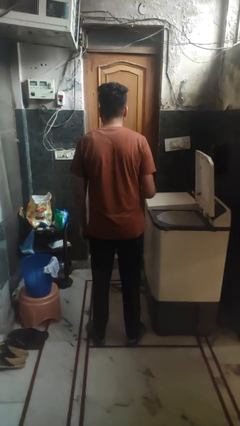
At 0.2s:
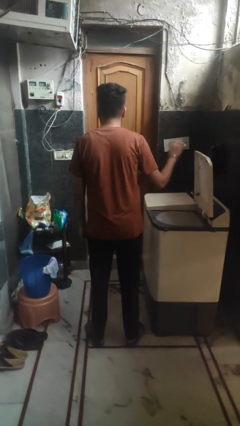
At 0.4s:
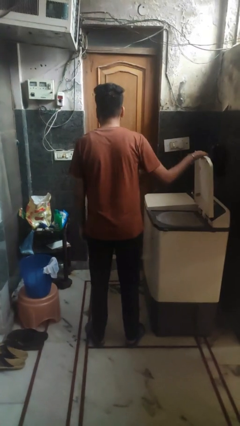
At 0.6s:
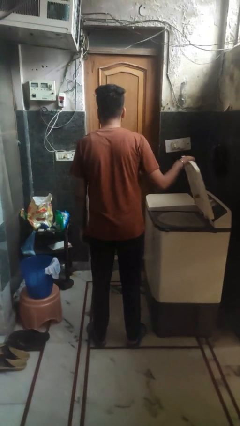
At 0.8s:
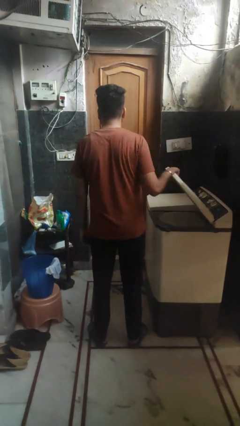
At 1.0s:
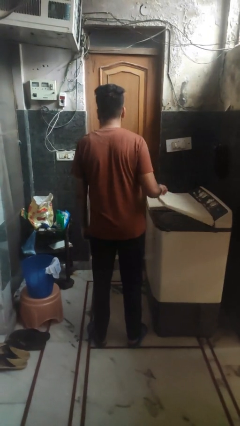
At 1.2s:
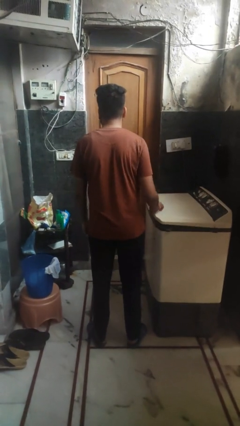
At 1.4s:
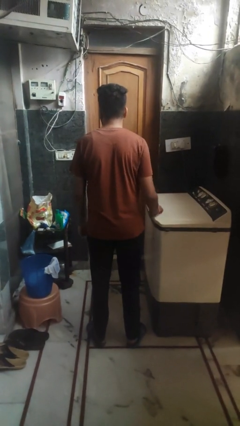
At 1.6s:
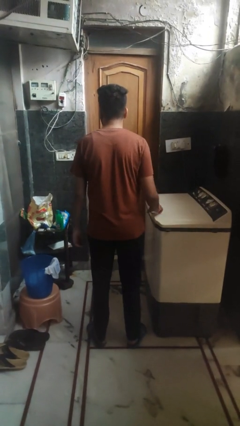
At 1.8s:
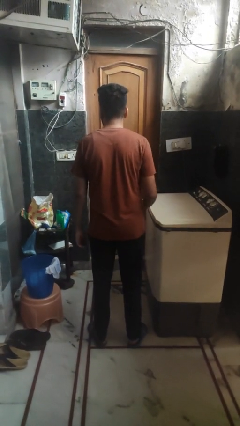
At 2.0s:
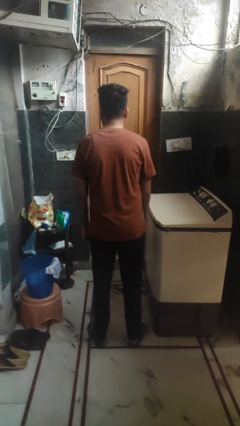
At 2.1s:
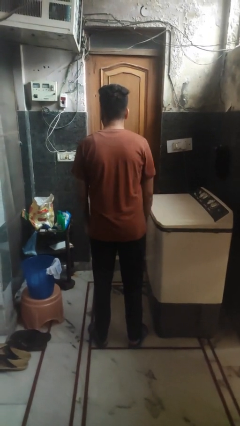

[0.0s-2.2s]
person closes clothes washer

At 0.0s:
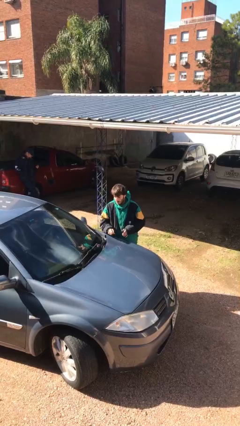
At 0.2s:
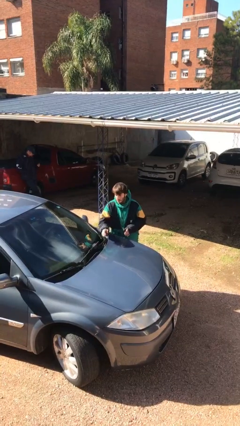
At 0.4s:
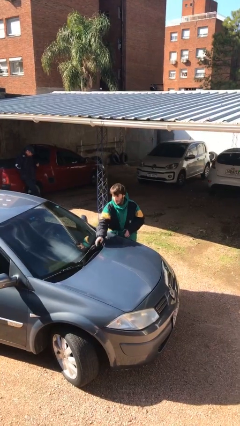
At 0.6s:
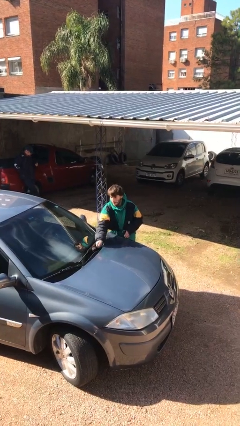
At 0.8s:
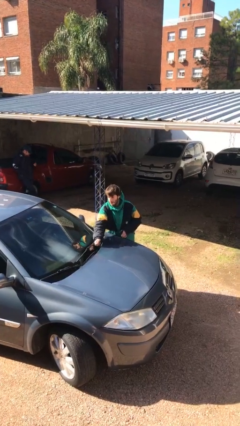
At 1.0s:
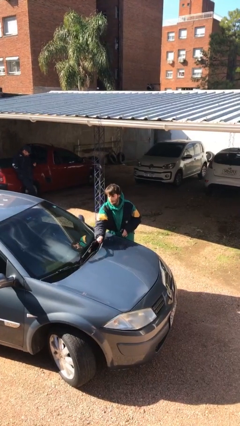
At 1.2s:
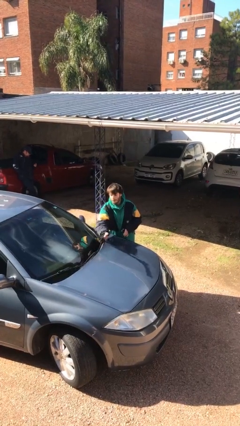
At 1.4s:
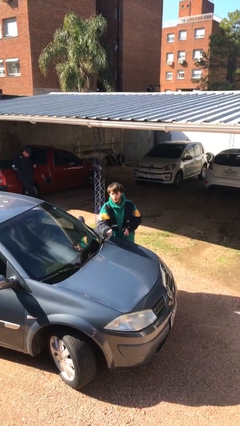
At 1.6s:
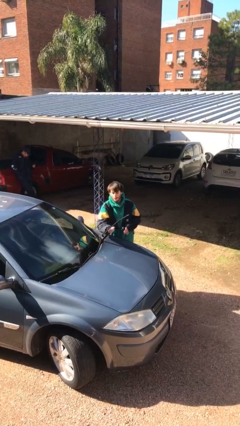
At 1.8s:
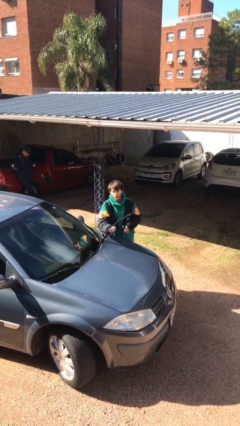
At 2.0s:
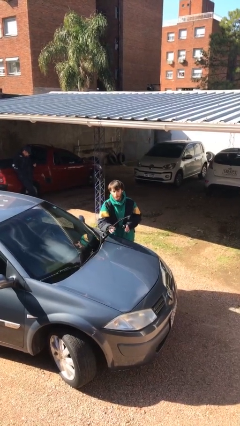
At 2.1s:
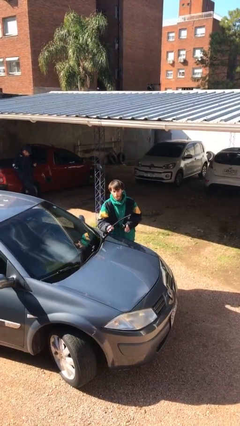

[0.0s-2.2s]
person flips up car wipers

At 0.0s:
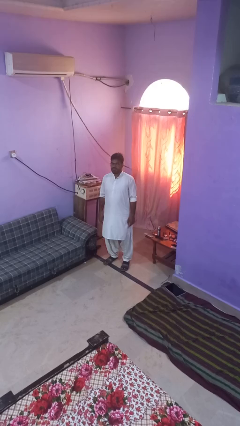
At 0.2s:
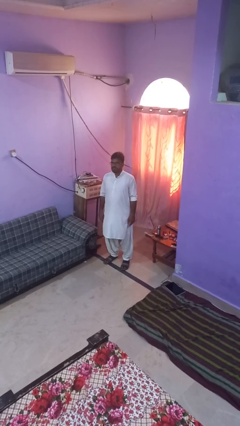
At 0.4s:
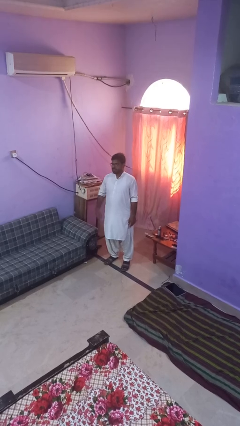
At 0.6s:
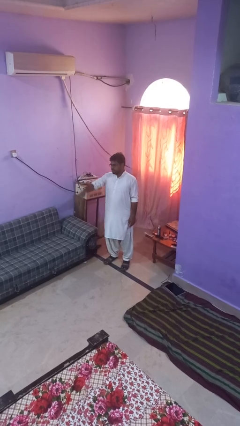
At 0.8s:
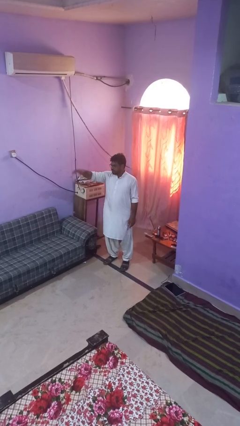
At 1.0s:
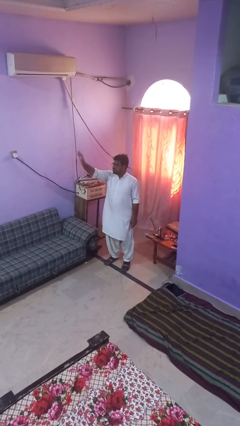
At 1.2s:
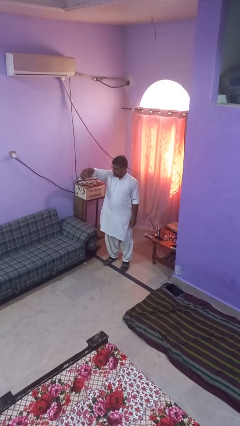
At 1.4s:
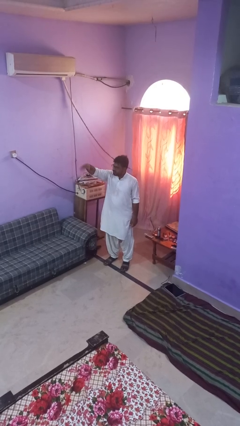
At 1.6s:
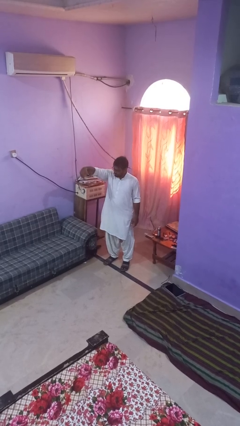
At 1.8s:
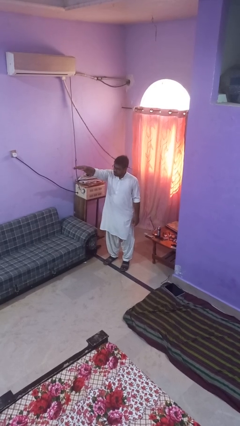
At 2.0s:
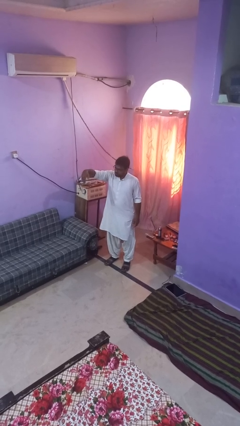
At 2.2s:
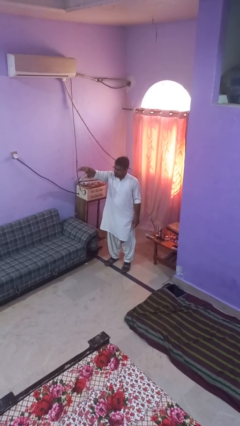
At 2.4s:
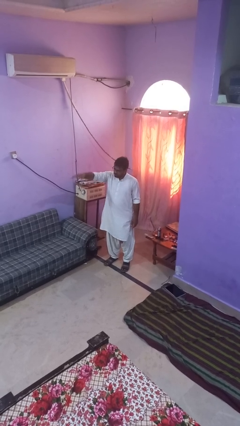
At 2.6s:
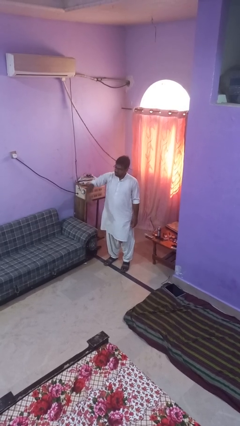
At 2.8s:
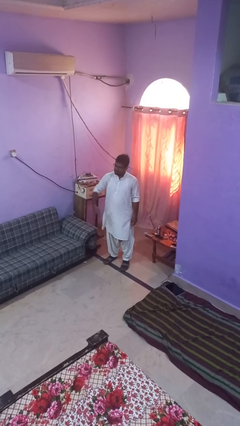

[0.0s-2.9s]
person gestures come here

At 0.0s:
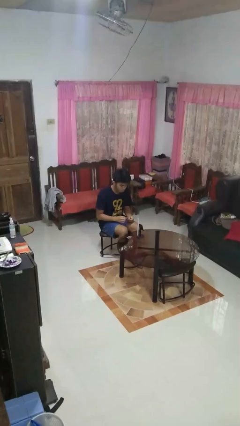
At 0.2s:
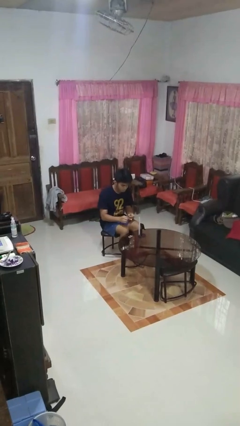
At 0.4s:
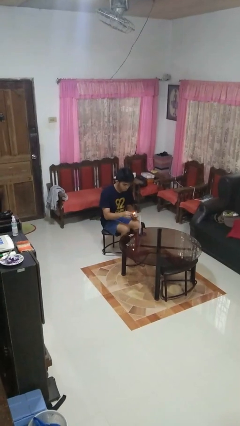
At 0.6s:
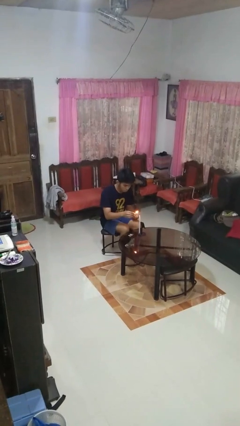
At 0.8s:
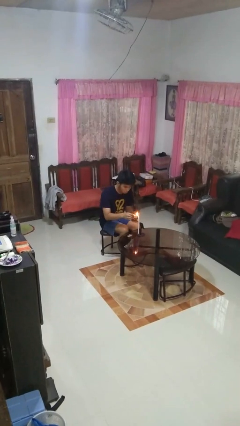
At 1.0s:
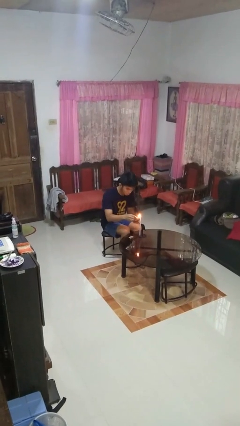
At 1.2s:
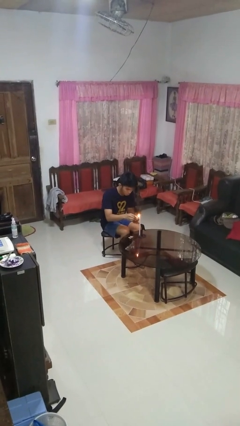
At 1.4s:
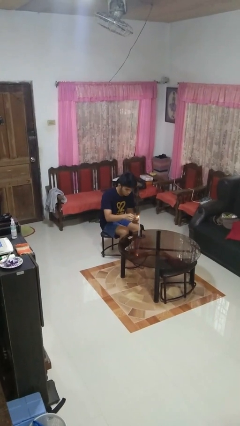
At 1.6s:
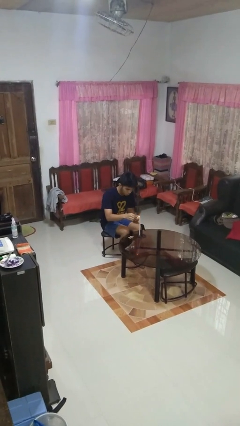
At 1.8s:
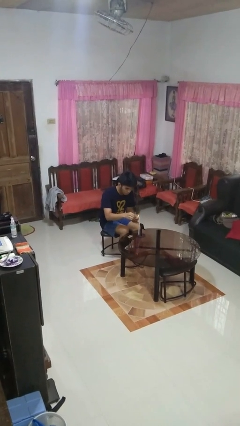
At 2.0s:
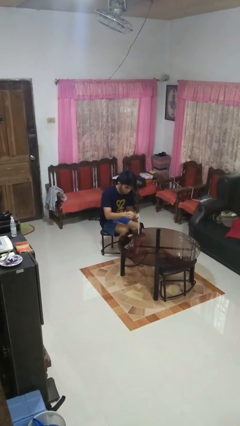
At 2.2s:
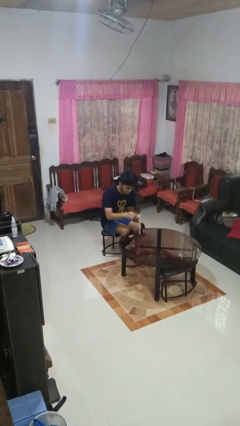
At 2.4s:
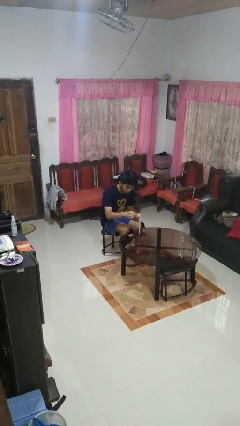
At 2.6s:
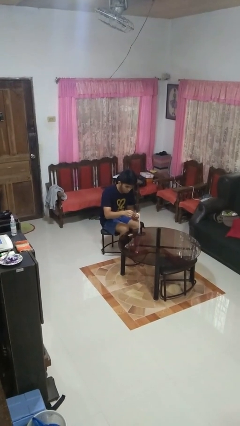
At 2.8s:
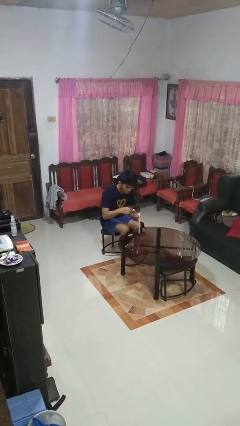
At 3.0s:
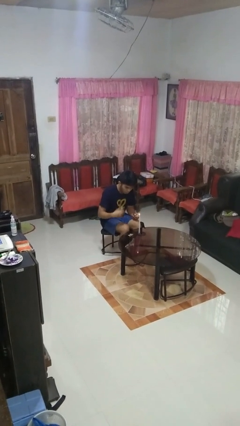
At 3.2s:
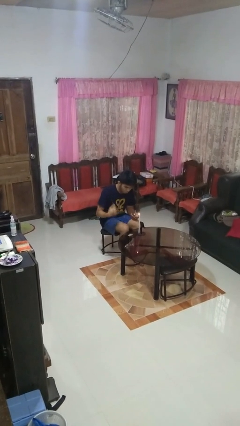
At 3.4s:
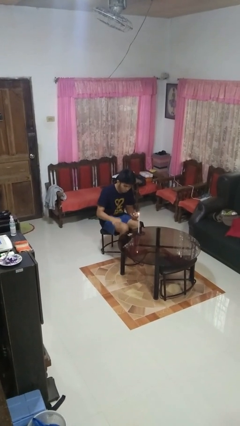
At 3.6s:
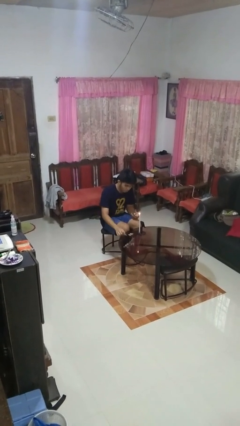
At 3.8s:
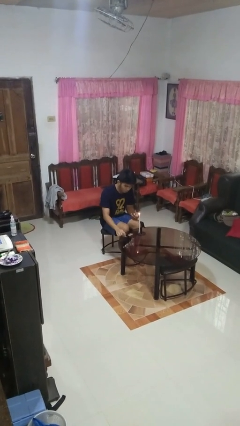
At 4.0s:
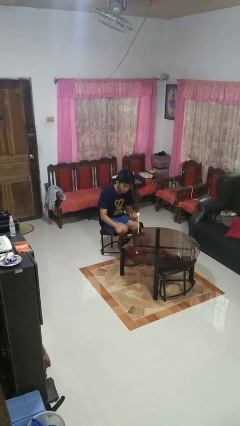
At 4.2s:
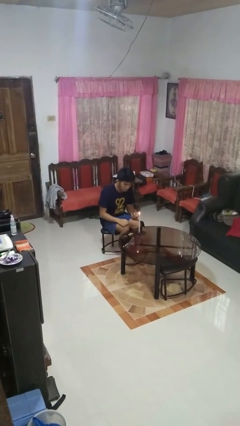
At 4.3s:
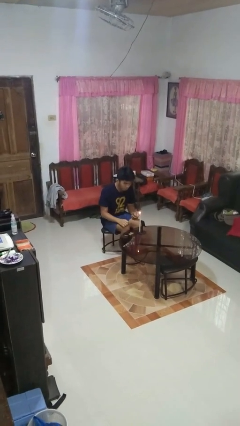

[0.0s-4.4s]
person lights candle

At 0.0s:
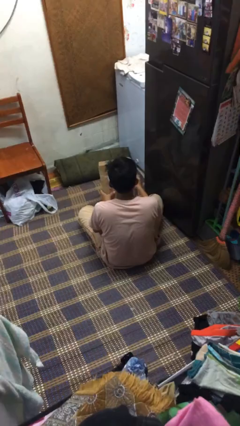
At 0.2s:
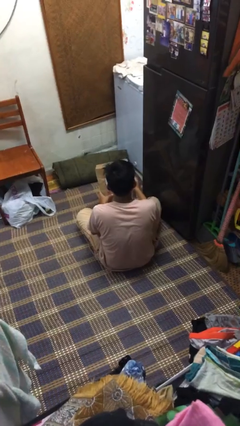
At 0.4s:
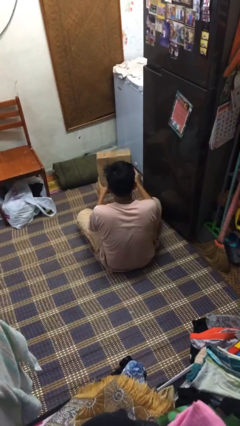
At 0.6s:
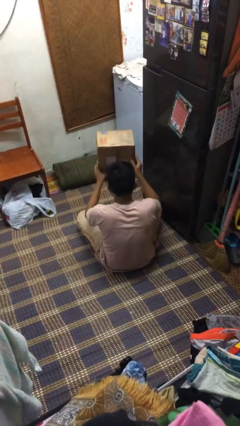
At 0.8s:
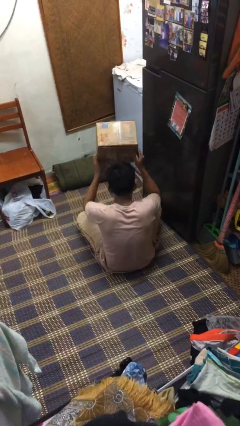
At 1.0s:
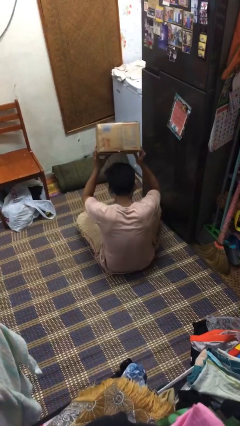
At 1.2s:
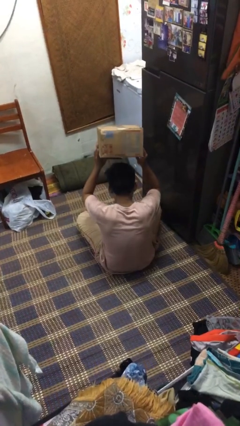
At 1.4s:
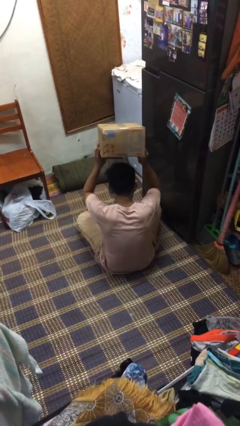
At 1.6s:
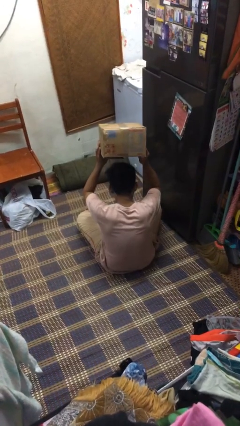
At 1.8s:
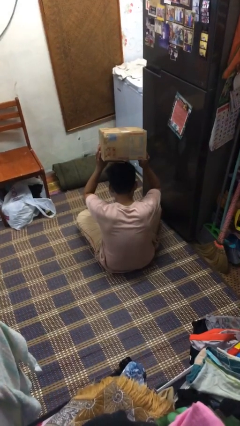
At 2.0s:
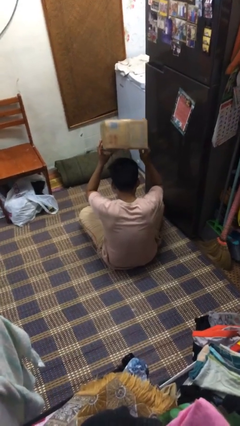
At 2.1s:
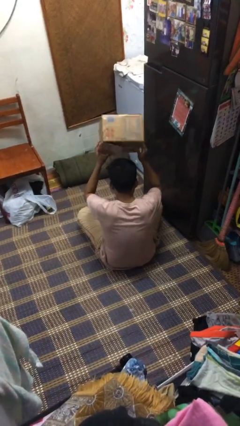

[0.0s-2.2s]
person holds object above head

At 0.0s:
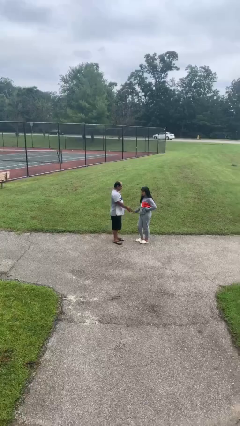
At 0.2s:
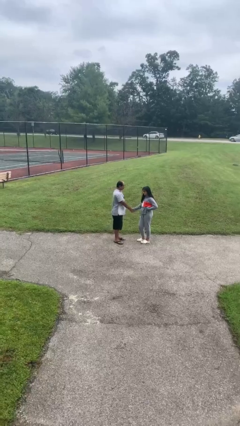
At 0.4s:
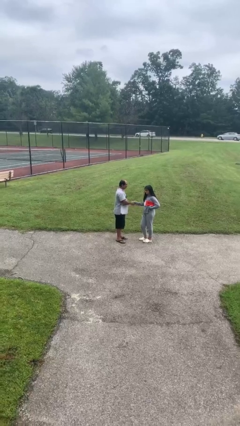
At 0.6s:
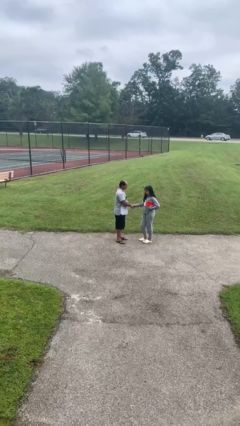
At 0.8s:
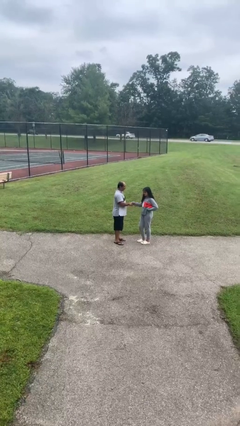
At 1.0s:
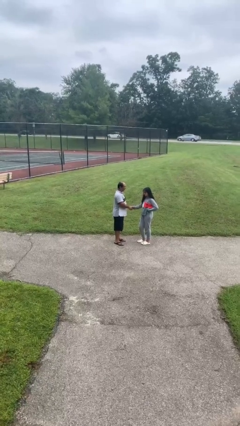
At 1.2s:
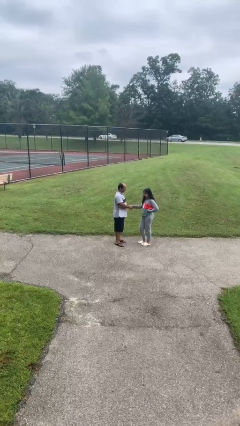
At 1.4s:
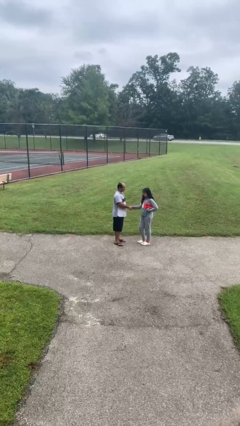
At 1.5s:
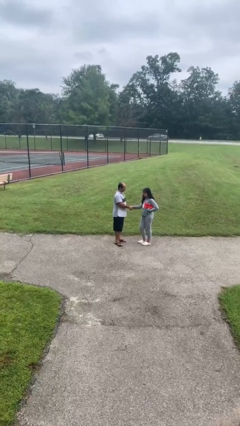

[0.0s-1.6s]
person shakes hand

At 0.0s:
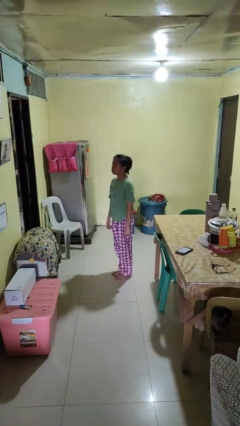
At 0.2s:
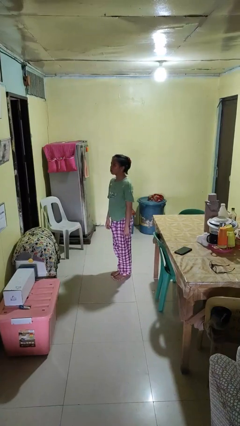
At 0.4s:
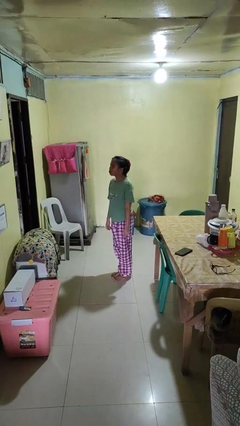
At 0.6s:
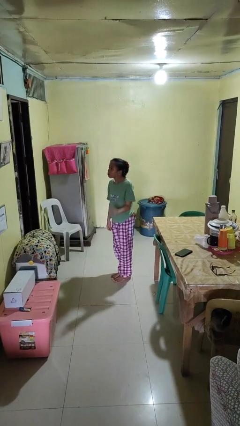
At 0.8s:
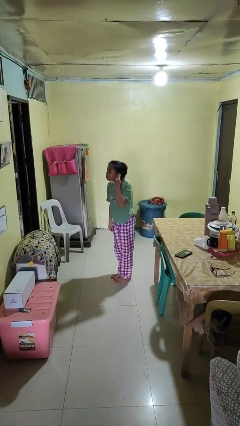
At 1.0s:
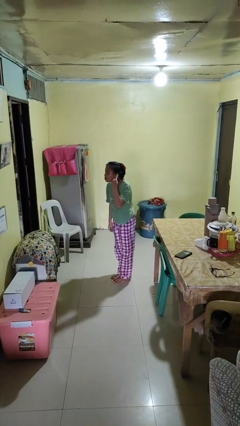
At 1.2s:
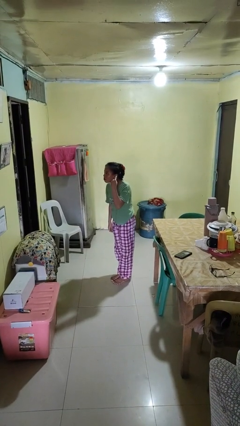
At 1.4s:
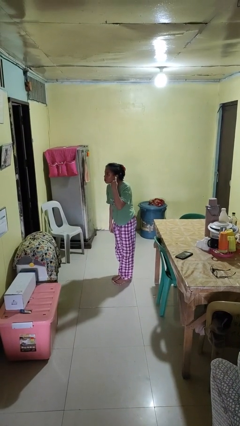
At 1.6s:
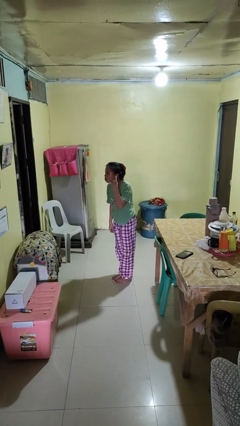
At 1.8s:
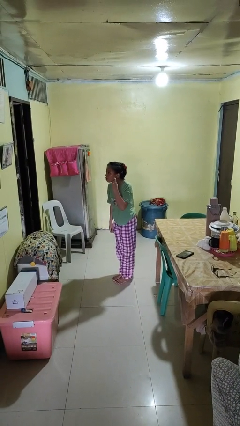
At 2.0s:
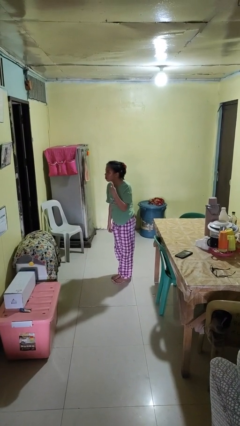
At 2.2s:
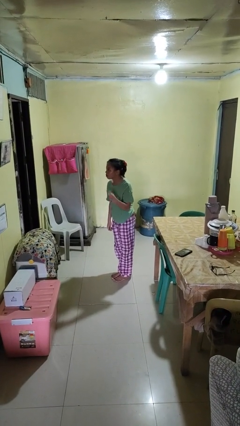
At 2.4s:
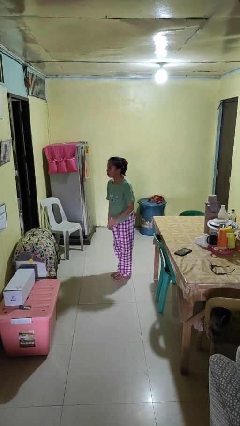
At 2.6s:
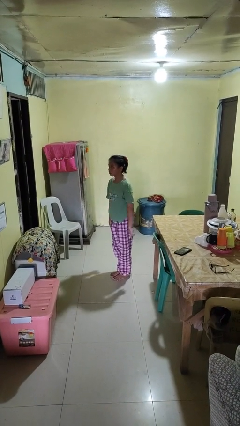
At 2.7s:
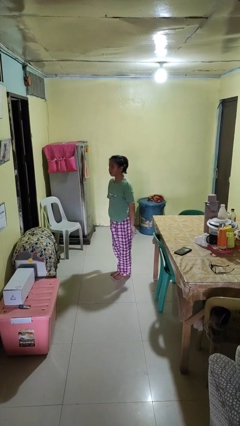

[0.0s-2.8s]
person gestures listen closely
